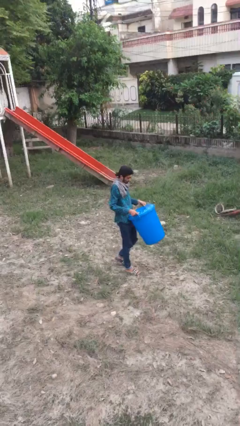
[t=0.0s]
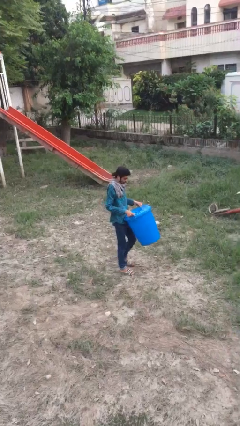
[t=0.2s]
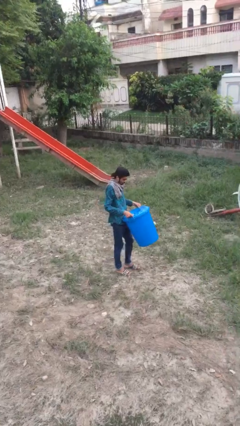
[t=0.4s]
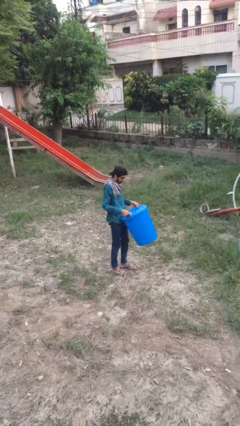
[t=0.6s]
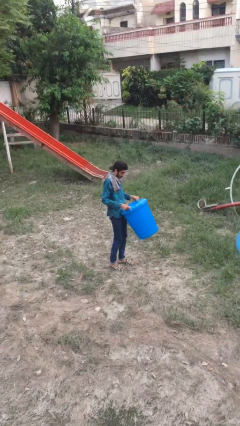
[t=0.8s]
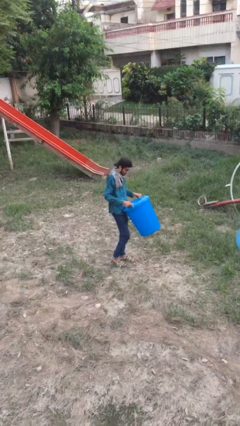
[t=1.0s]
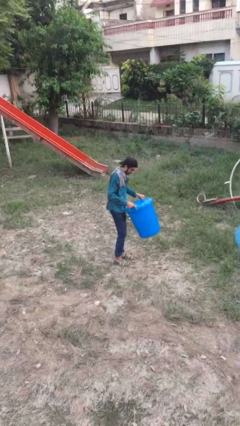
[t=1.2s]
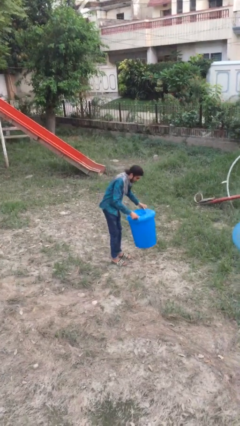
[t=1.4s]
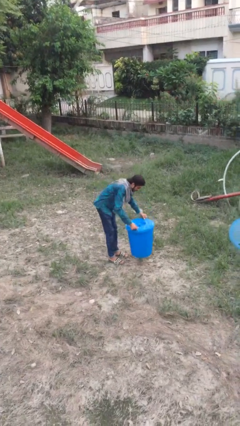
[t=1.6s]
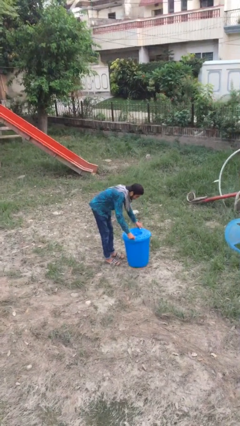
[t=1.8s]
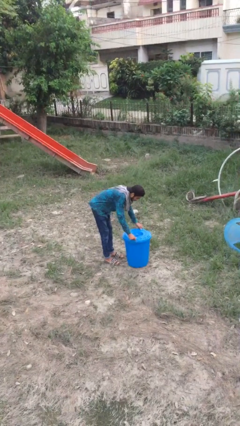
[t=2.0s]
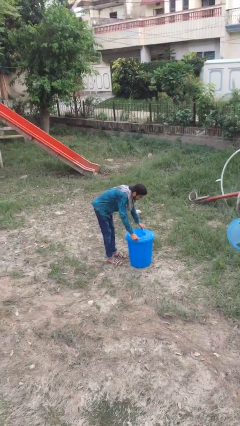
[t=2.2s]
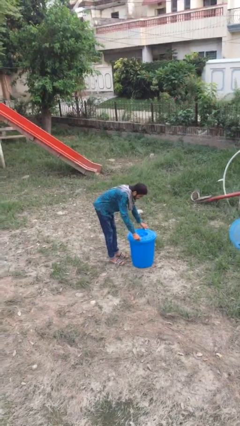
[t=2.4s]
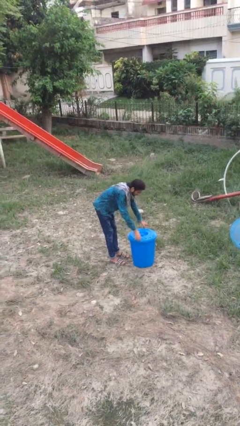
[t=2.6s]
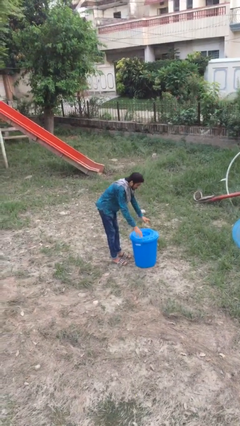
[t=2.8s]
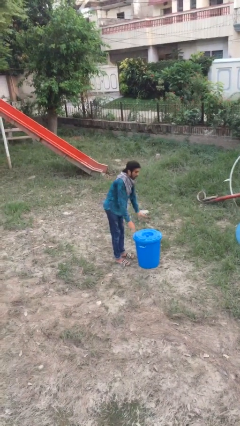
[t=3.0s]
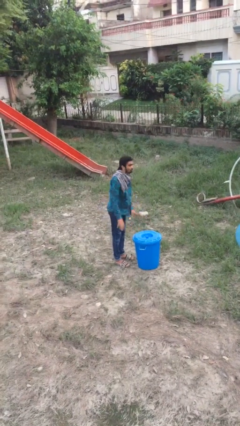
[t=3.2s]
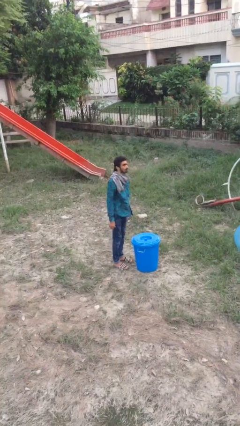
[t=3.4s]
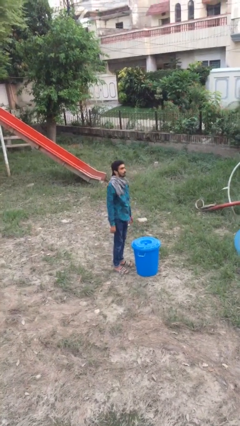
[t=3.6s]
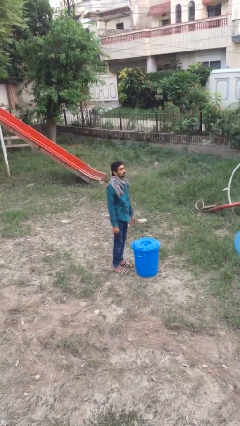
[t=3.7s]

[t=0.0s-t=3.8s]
person puts down object on floor

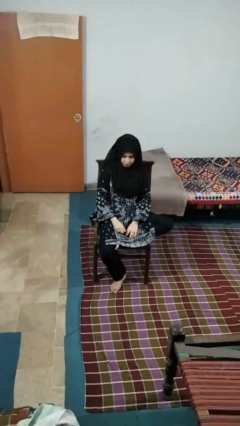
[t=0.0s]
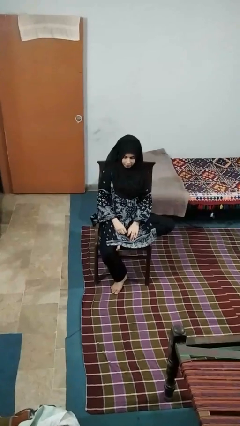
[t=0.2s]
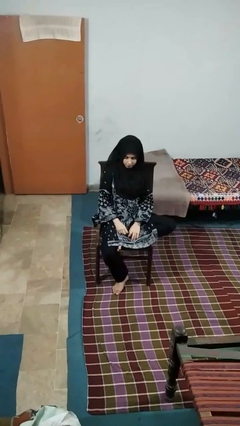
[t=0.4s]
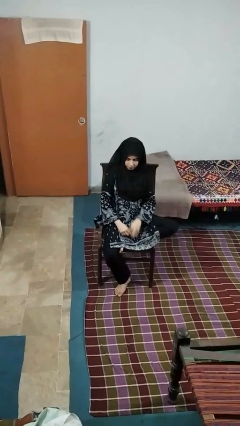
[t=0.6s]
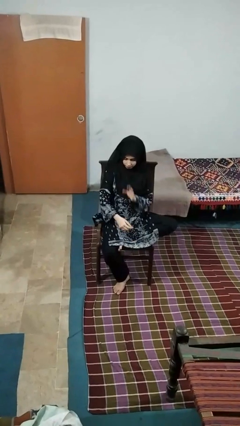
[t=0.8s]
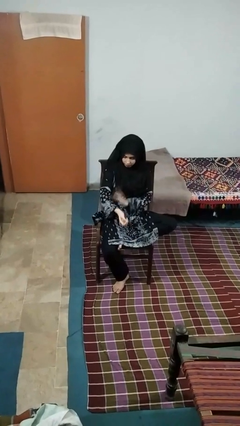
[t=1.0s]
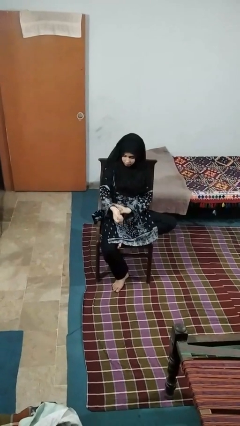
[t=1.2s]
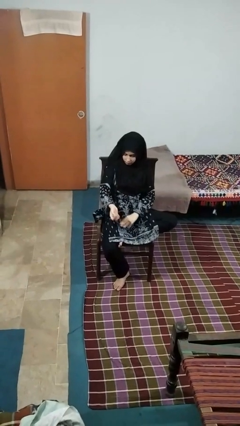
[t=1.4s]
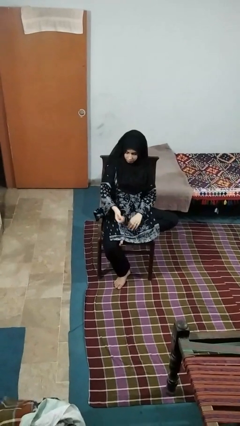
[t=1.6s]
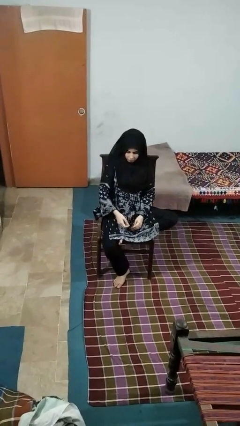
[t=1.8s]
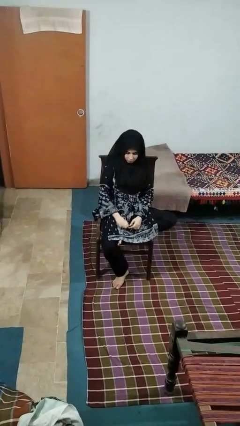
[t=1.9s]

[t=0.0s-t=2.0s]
person swats bug

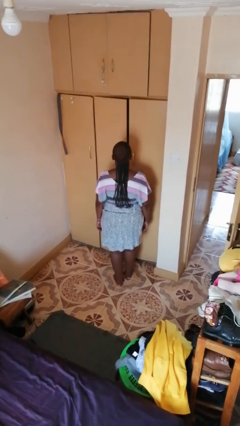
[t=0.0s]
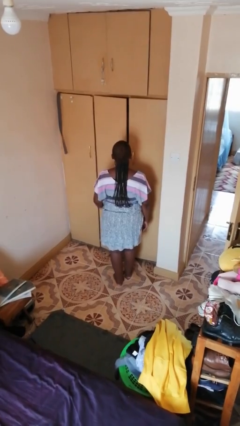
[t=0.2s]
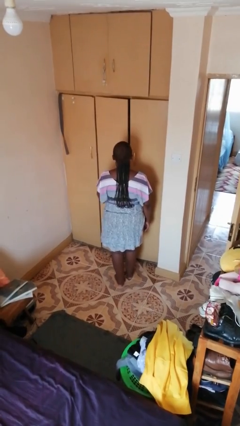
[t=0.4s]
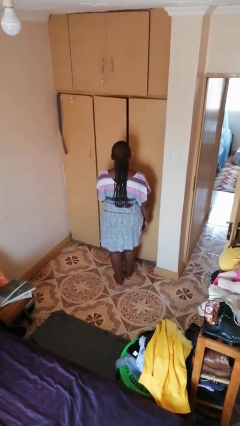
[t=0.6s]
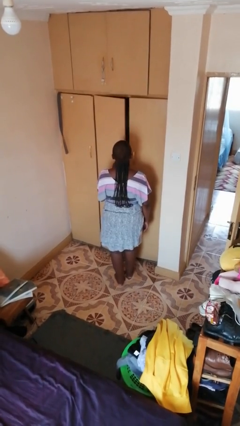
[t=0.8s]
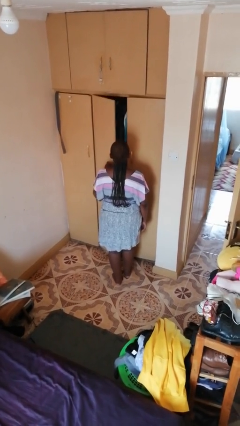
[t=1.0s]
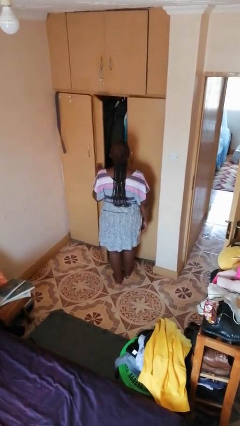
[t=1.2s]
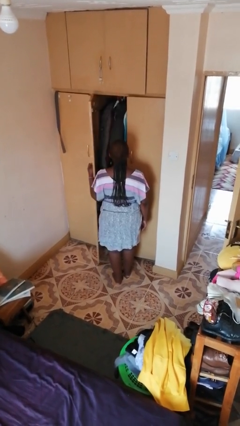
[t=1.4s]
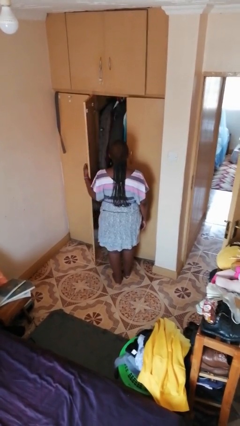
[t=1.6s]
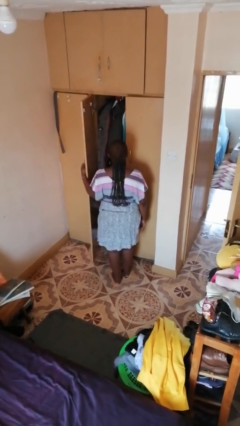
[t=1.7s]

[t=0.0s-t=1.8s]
person opens closet door

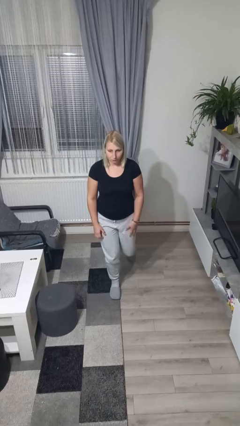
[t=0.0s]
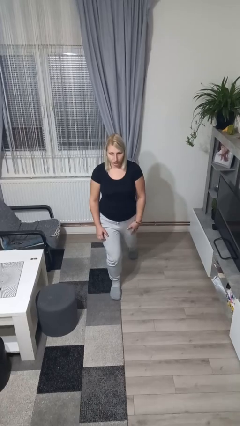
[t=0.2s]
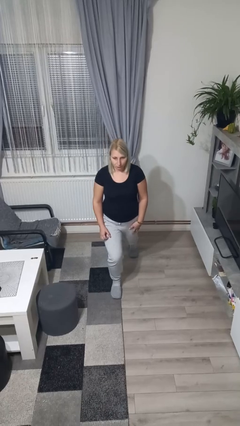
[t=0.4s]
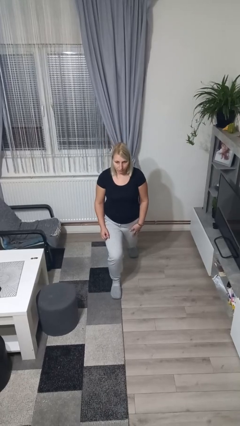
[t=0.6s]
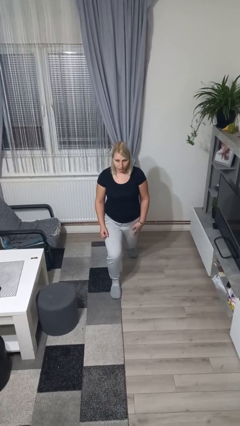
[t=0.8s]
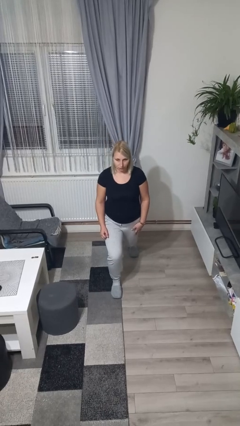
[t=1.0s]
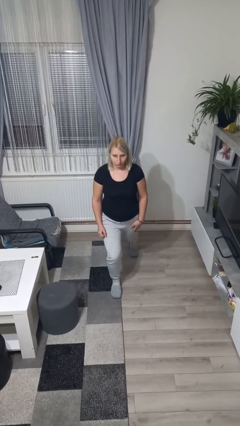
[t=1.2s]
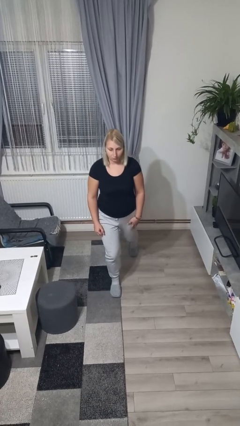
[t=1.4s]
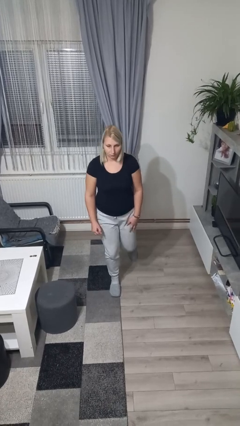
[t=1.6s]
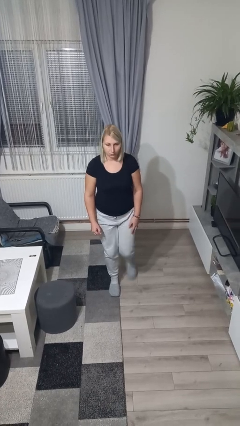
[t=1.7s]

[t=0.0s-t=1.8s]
person exercises with lunges

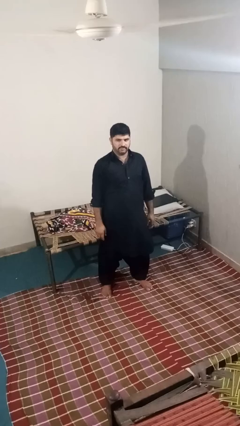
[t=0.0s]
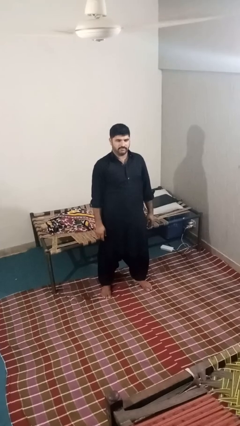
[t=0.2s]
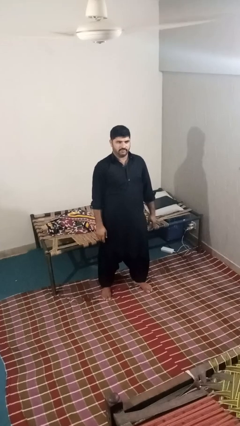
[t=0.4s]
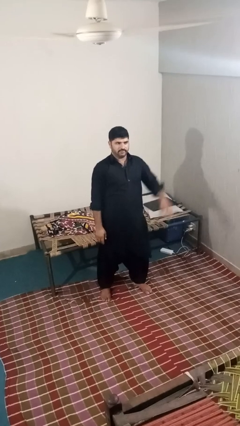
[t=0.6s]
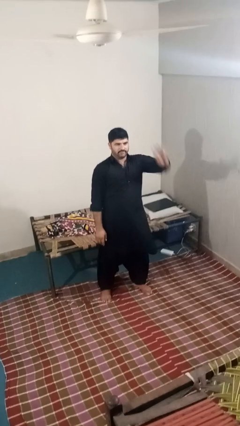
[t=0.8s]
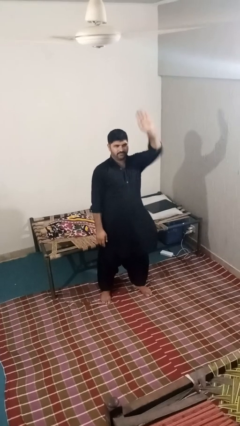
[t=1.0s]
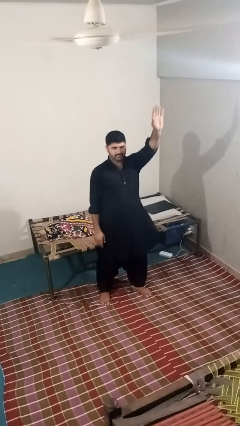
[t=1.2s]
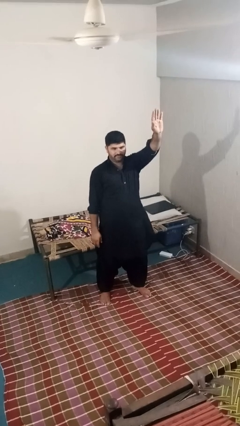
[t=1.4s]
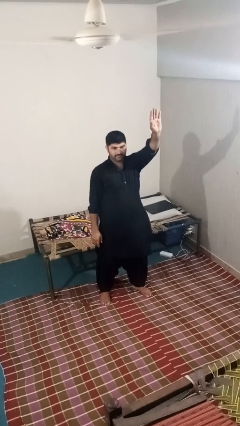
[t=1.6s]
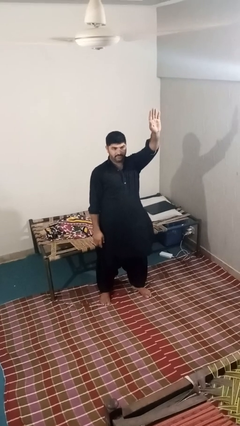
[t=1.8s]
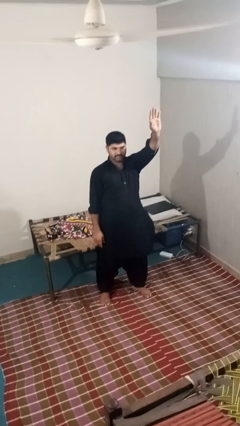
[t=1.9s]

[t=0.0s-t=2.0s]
person gestures raise hand

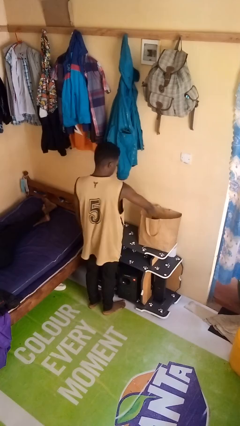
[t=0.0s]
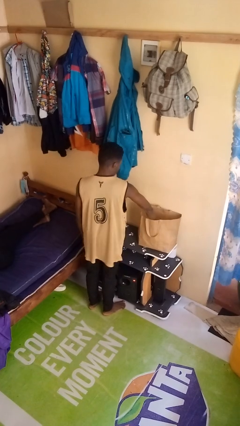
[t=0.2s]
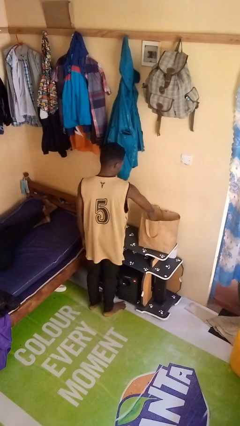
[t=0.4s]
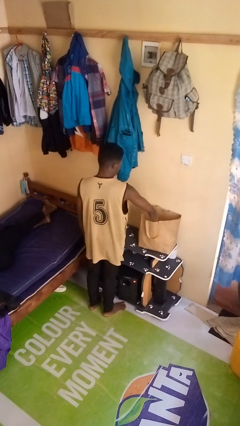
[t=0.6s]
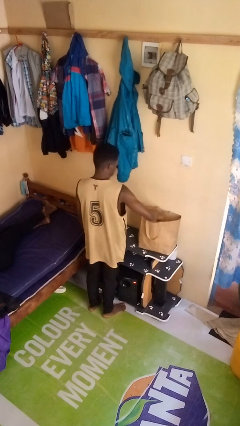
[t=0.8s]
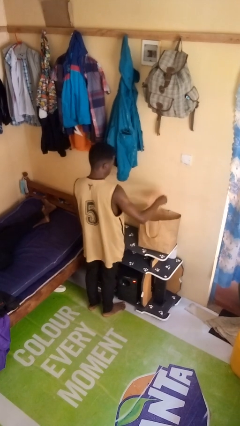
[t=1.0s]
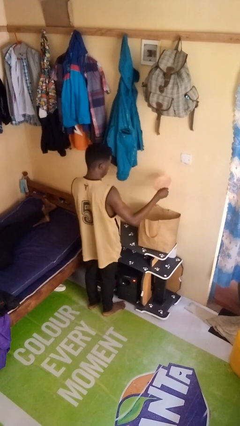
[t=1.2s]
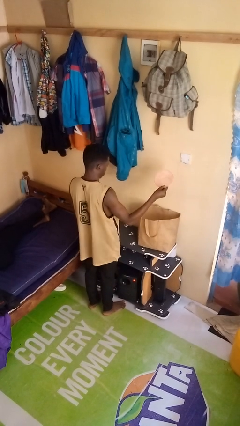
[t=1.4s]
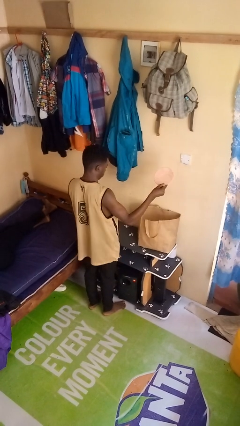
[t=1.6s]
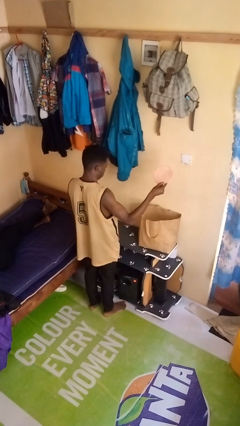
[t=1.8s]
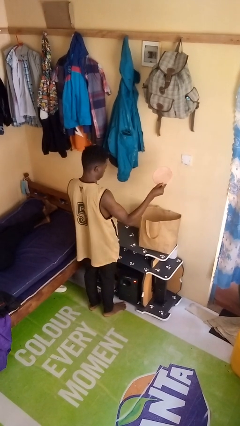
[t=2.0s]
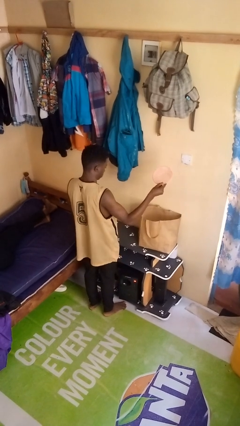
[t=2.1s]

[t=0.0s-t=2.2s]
person takes object from bag

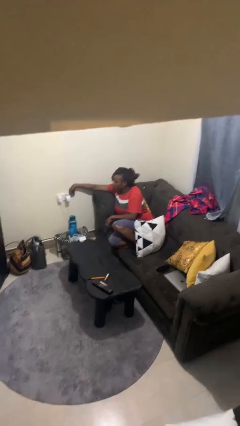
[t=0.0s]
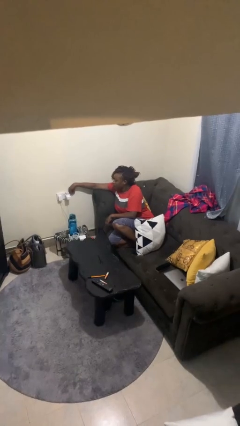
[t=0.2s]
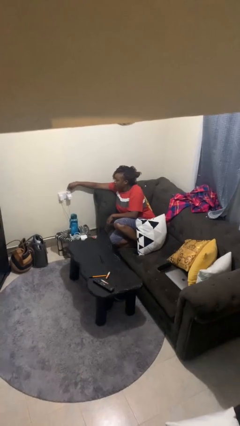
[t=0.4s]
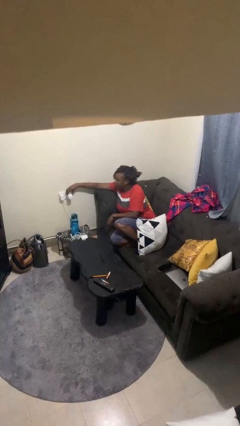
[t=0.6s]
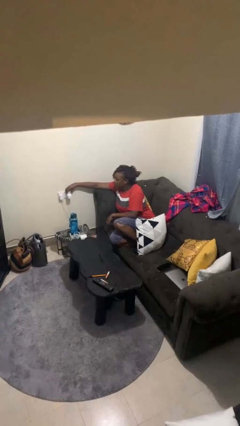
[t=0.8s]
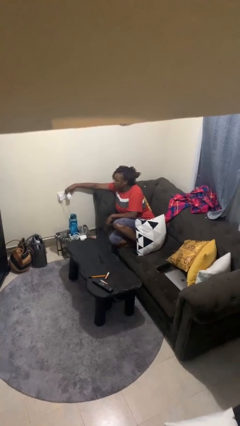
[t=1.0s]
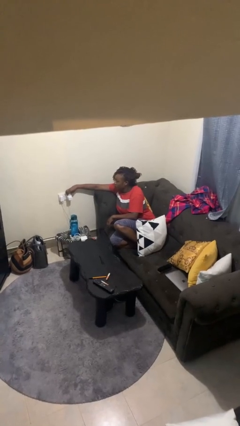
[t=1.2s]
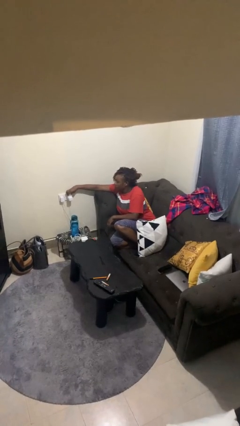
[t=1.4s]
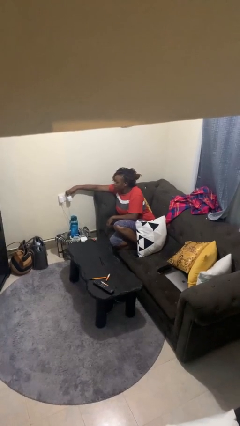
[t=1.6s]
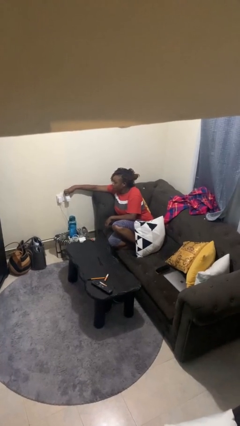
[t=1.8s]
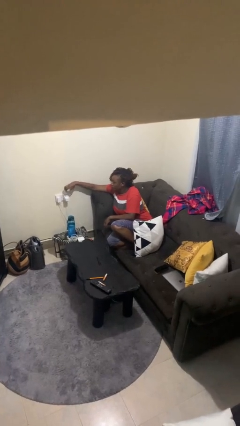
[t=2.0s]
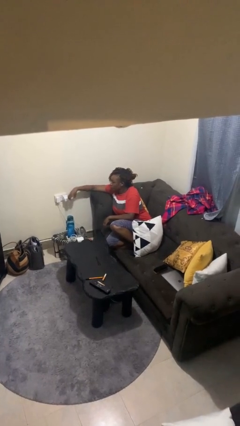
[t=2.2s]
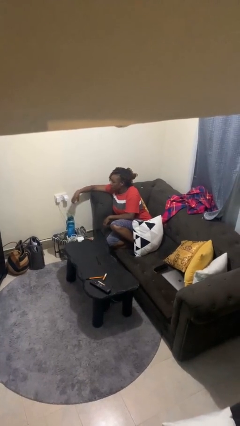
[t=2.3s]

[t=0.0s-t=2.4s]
person unplugs from electrical socket

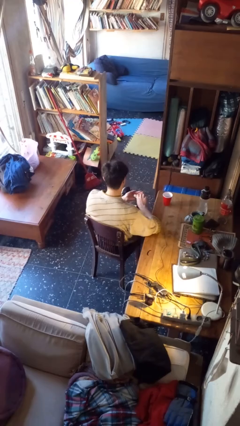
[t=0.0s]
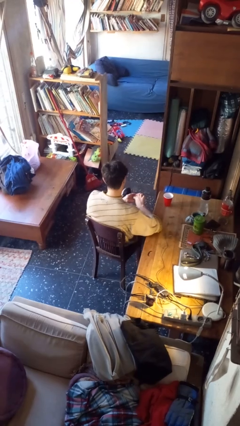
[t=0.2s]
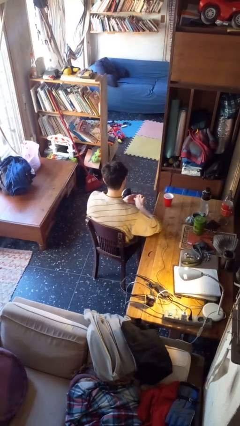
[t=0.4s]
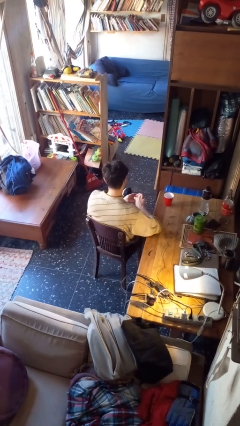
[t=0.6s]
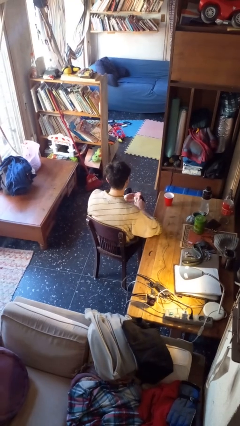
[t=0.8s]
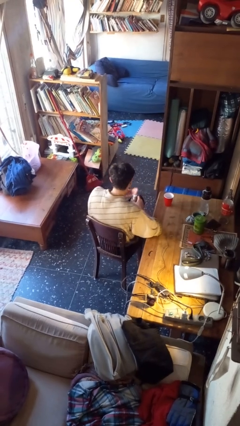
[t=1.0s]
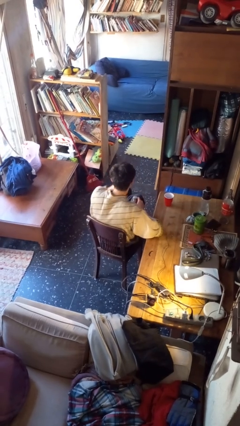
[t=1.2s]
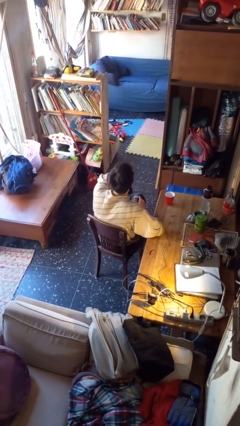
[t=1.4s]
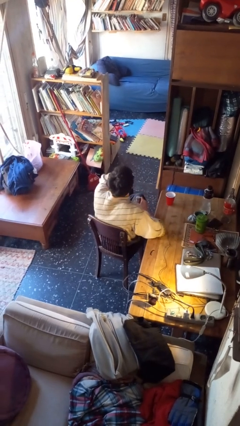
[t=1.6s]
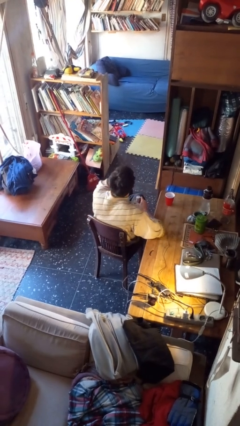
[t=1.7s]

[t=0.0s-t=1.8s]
person takes medicine pills
